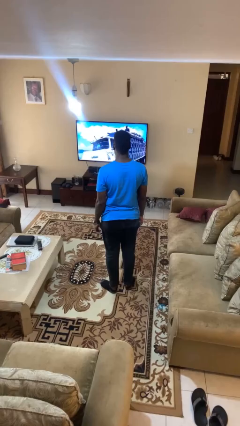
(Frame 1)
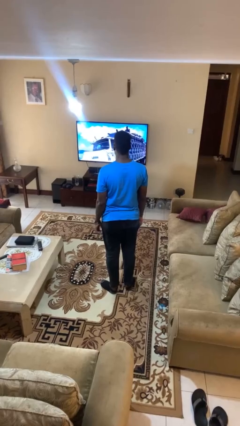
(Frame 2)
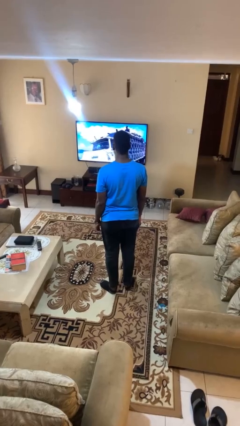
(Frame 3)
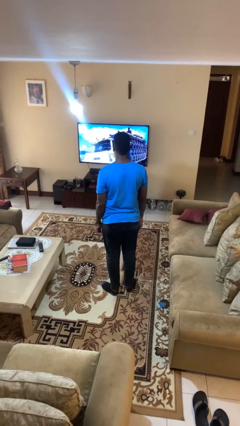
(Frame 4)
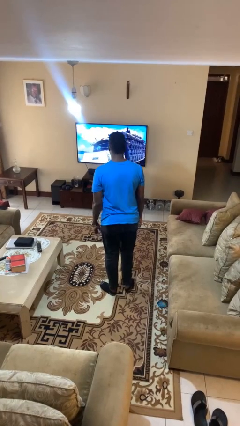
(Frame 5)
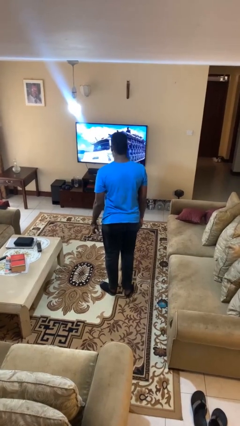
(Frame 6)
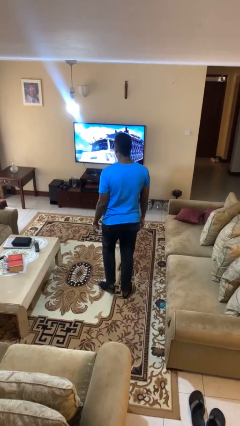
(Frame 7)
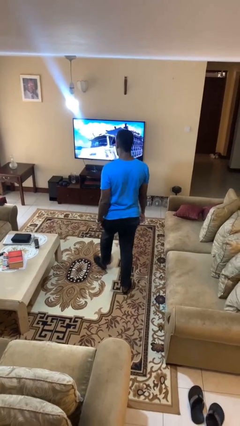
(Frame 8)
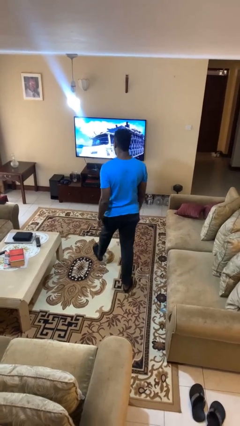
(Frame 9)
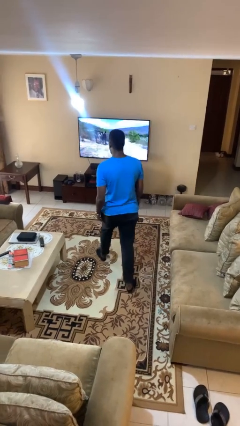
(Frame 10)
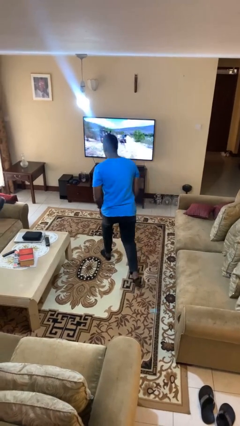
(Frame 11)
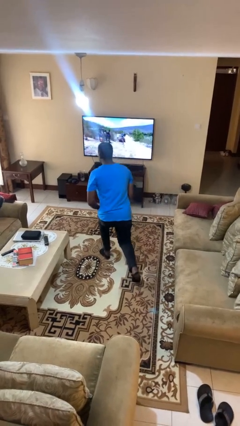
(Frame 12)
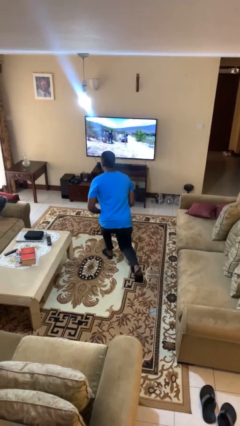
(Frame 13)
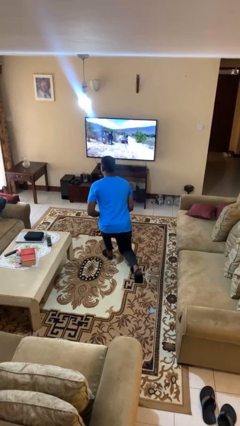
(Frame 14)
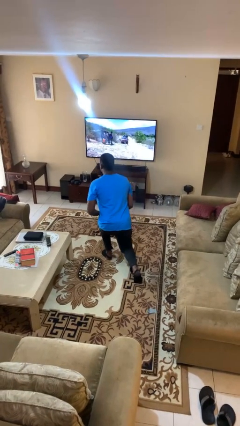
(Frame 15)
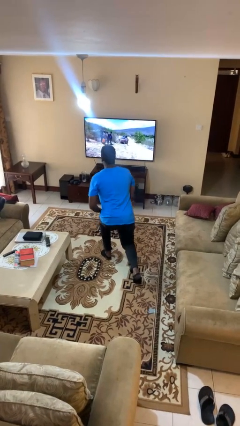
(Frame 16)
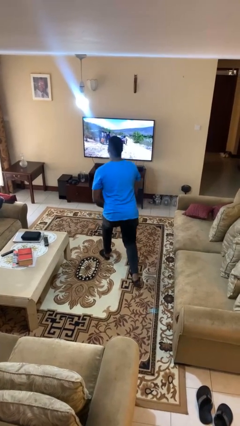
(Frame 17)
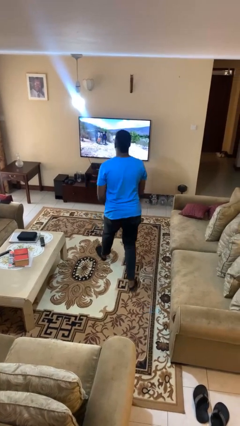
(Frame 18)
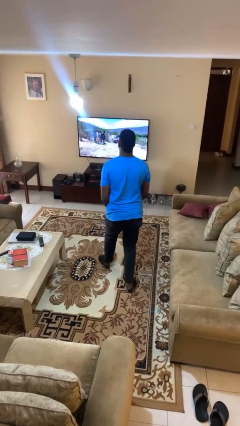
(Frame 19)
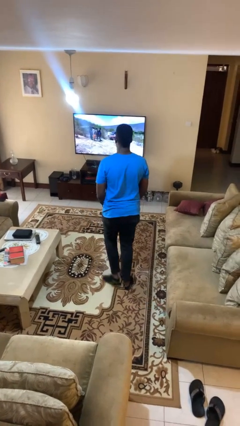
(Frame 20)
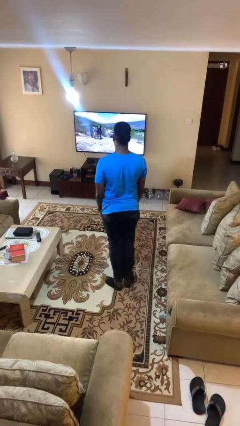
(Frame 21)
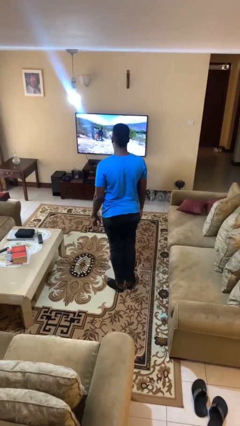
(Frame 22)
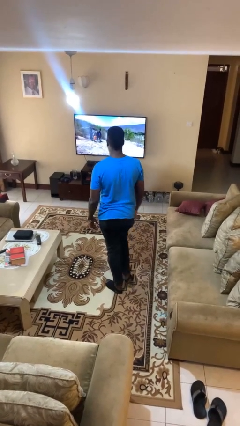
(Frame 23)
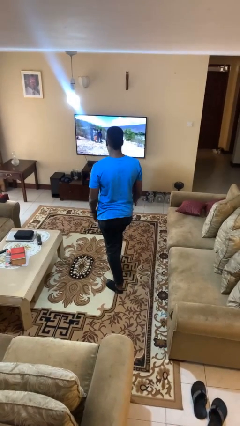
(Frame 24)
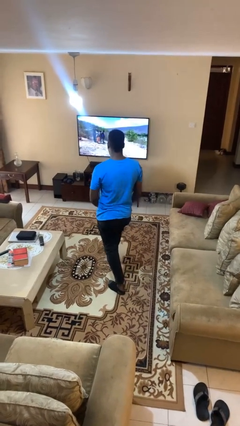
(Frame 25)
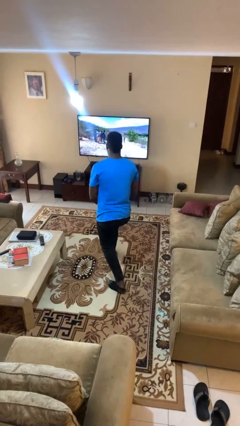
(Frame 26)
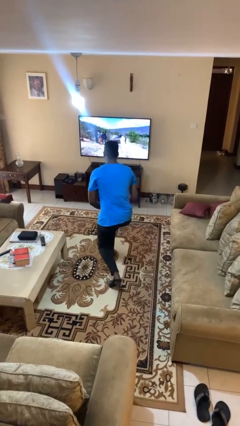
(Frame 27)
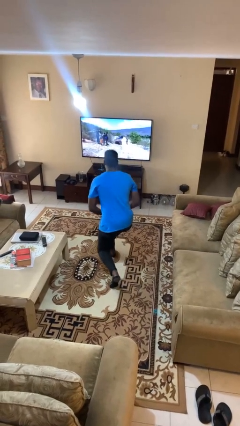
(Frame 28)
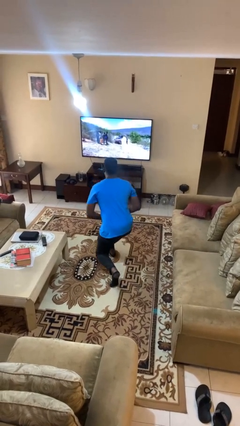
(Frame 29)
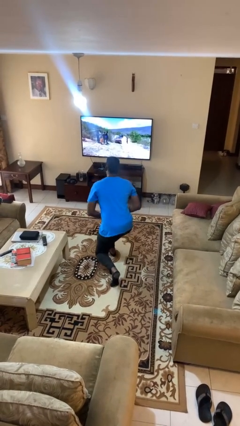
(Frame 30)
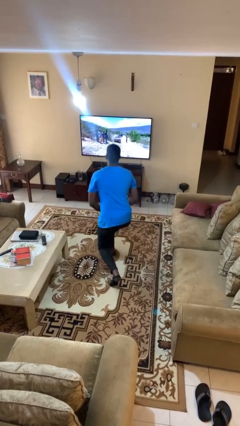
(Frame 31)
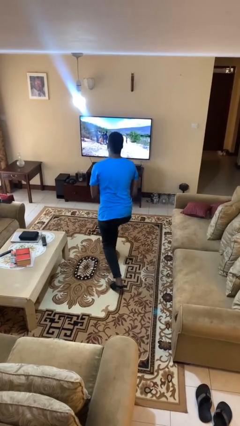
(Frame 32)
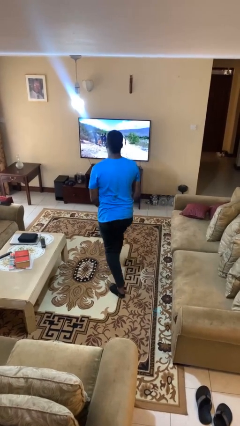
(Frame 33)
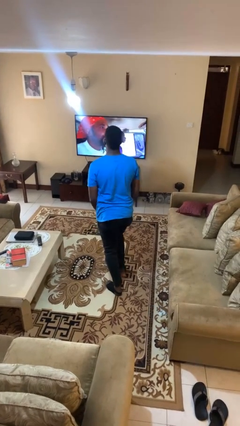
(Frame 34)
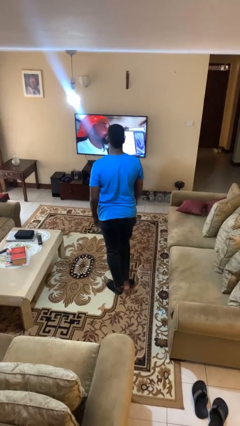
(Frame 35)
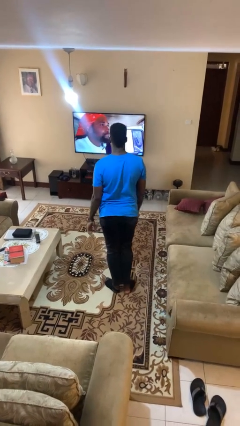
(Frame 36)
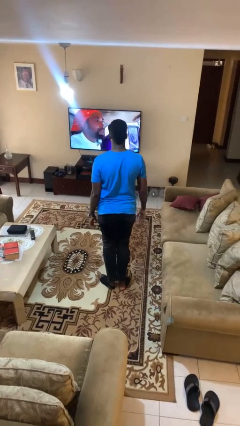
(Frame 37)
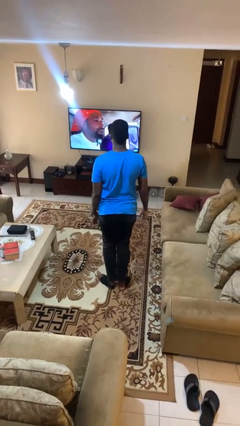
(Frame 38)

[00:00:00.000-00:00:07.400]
person exercises with lunges

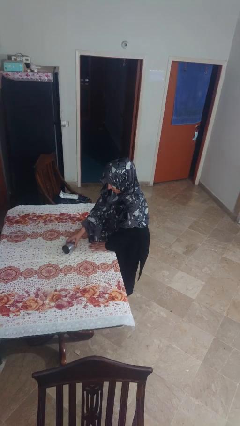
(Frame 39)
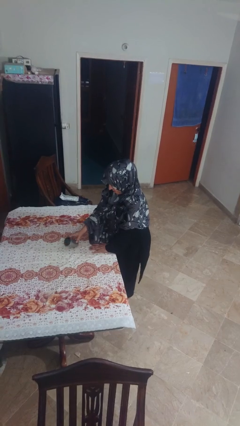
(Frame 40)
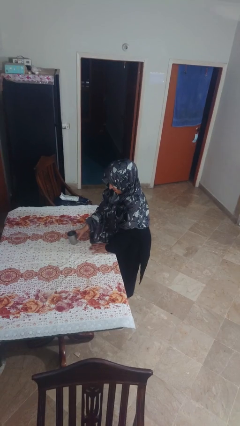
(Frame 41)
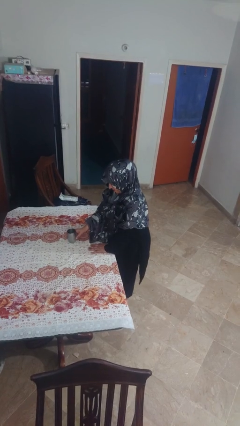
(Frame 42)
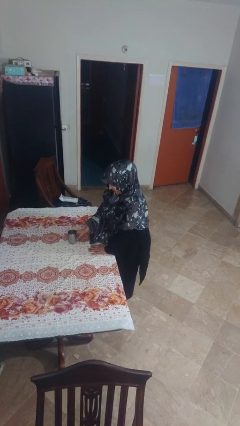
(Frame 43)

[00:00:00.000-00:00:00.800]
person sets upright glass

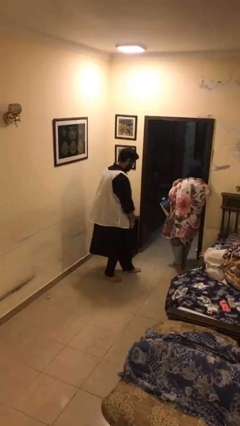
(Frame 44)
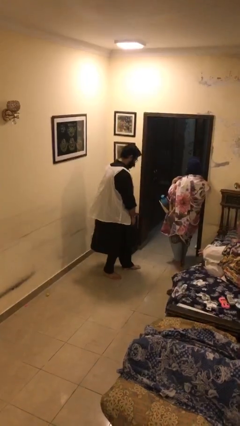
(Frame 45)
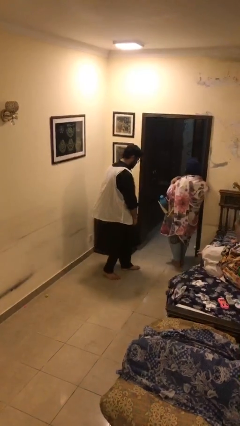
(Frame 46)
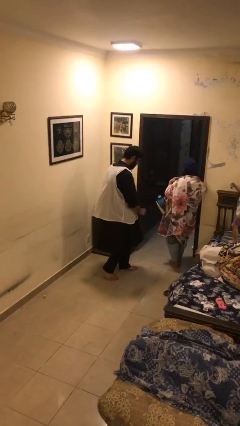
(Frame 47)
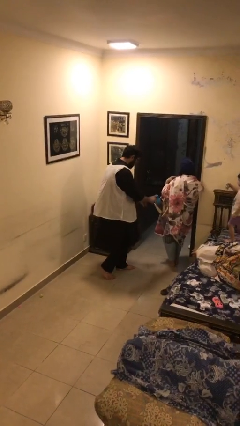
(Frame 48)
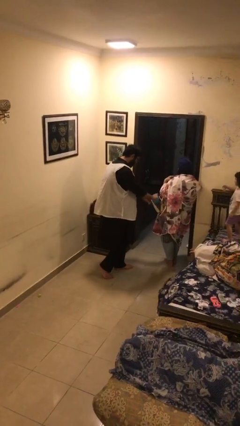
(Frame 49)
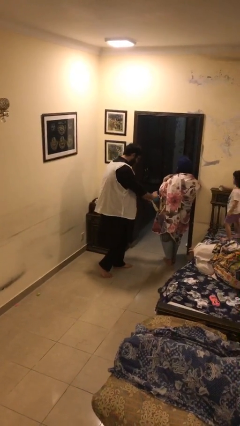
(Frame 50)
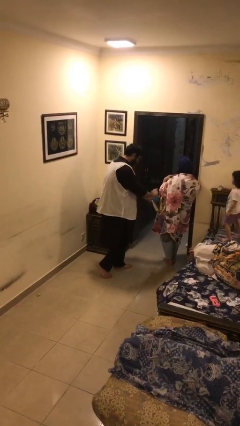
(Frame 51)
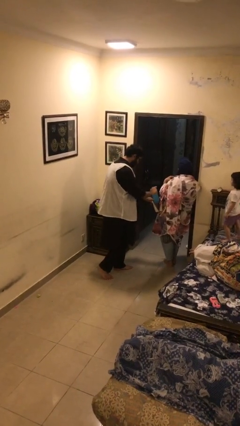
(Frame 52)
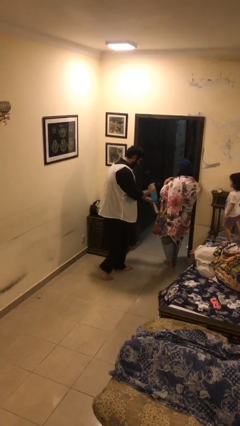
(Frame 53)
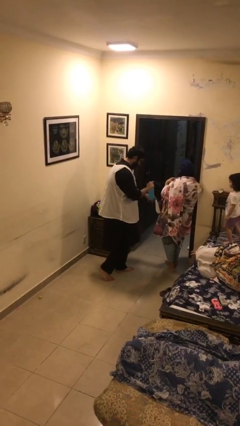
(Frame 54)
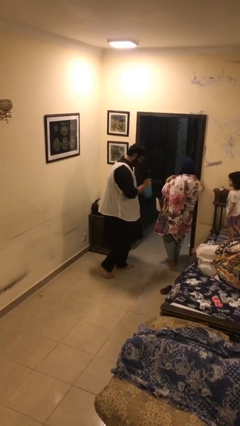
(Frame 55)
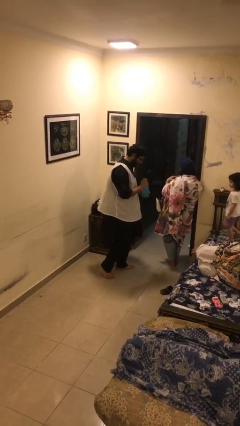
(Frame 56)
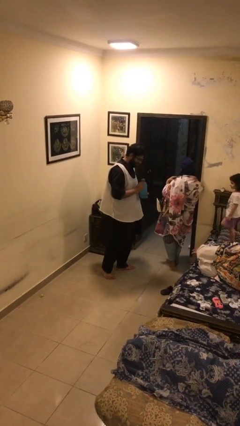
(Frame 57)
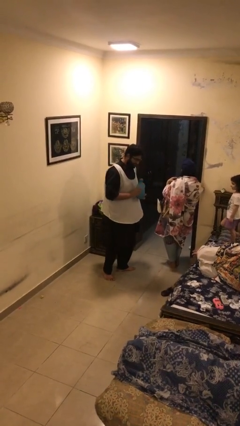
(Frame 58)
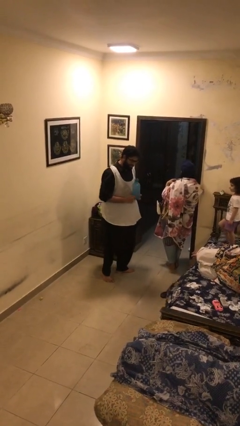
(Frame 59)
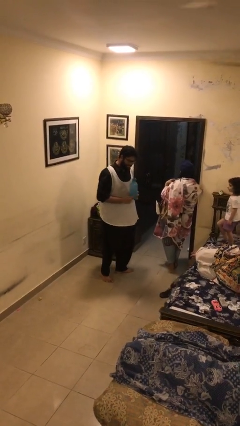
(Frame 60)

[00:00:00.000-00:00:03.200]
person steals object from person

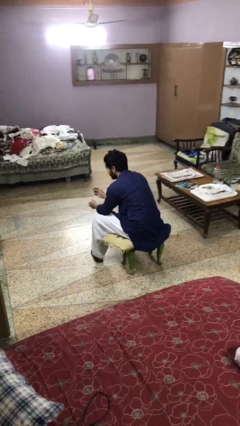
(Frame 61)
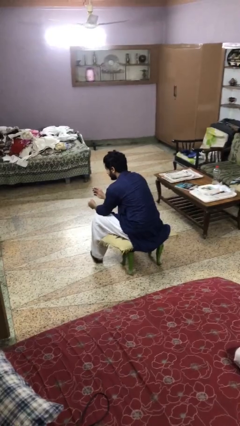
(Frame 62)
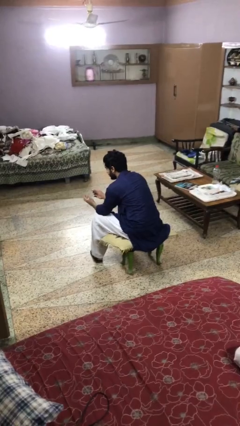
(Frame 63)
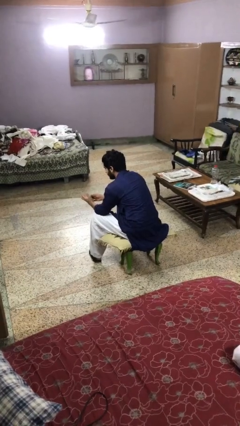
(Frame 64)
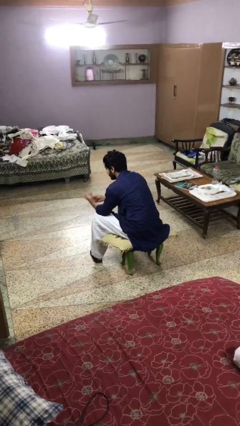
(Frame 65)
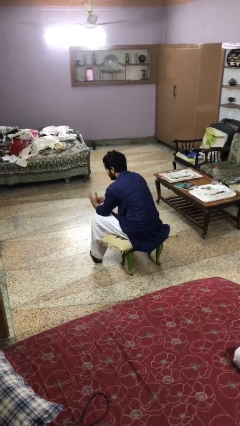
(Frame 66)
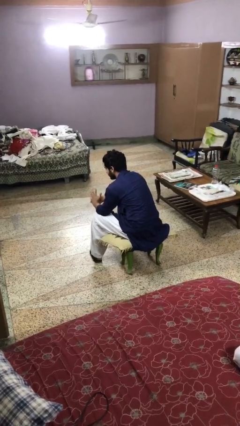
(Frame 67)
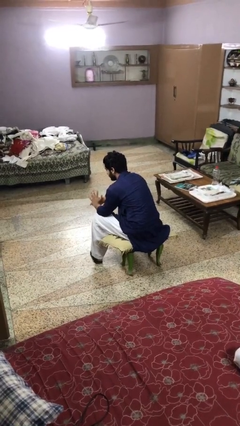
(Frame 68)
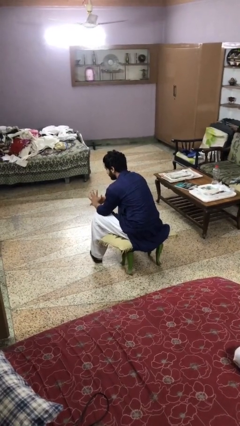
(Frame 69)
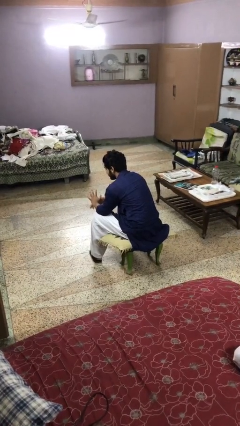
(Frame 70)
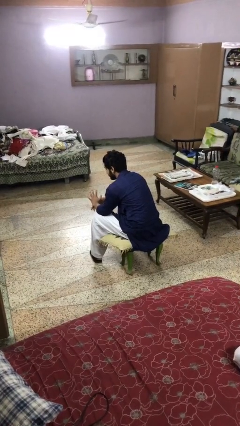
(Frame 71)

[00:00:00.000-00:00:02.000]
person puts on ring

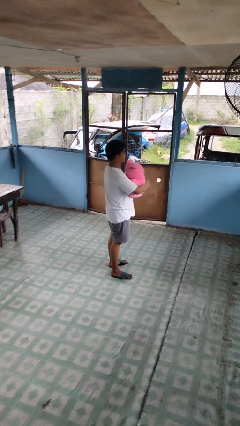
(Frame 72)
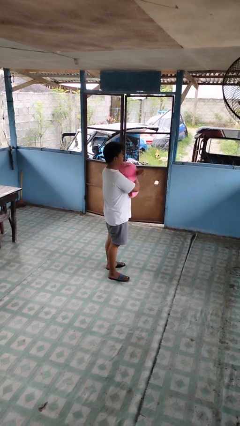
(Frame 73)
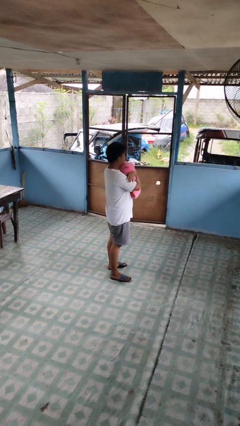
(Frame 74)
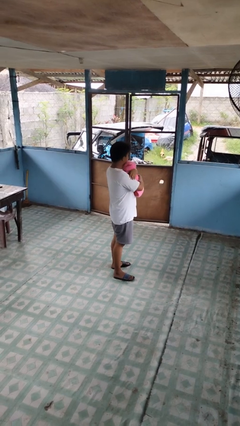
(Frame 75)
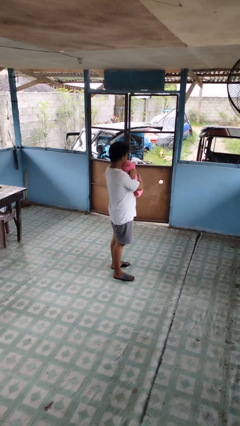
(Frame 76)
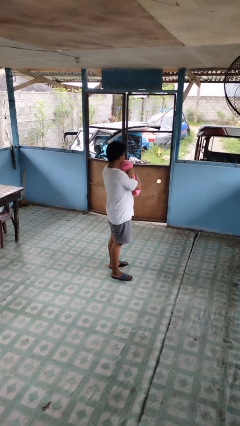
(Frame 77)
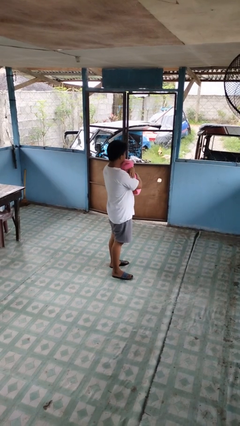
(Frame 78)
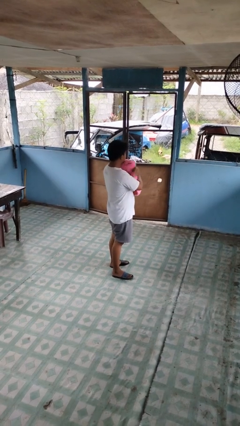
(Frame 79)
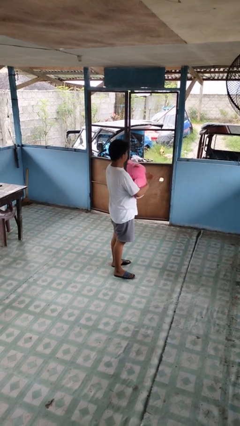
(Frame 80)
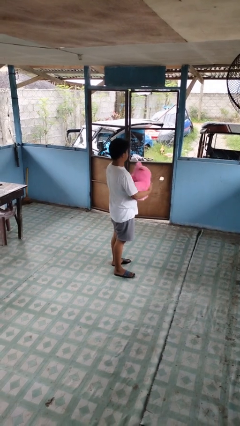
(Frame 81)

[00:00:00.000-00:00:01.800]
person hugs stuffed animal

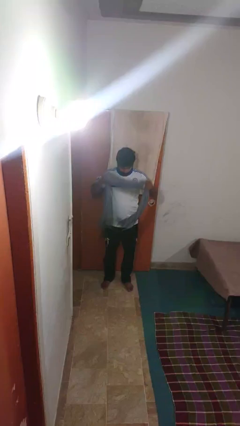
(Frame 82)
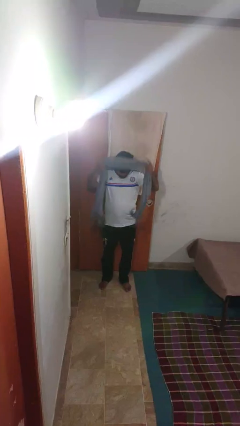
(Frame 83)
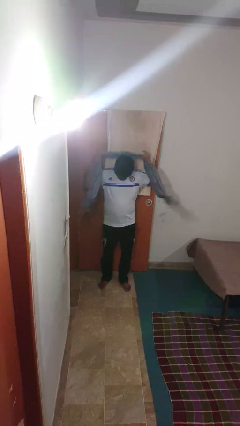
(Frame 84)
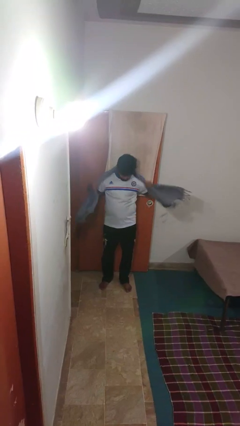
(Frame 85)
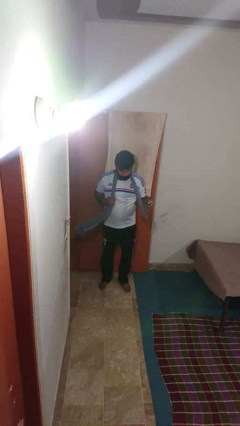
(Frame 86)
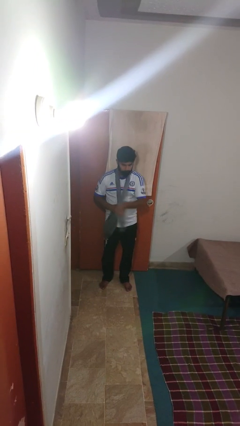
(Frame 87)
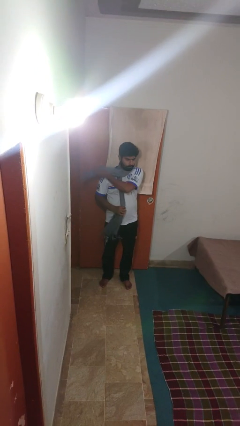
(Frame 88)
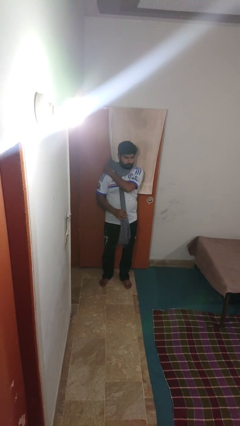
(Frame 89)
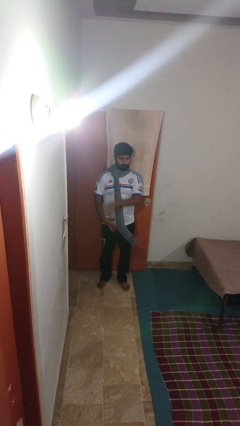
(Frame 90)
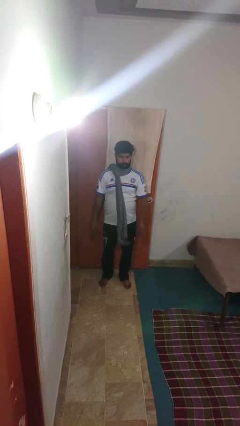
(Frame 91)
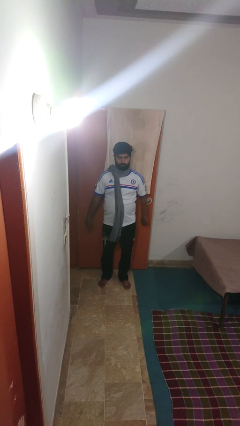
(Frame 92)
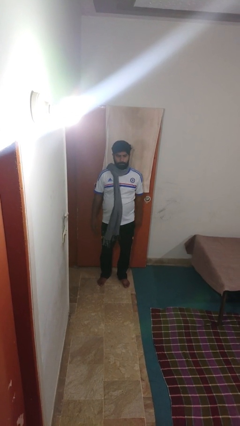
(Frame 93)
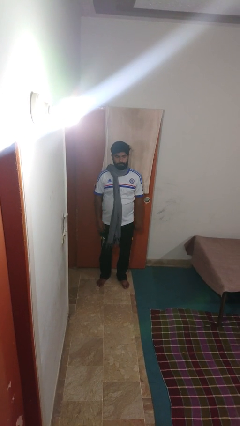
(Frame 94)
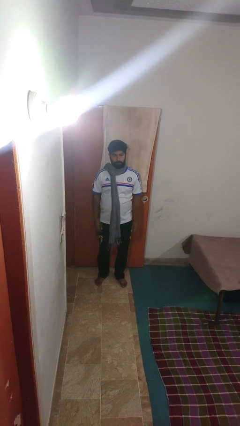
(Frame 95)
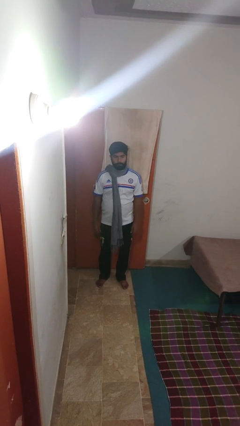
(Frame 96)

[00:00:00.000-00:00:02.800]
person puts on scarf
